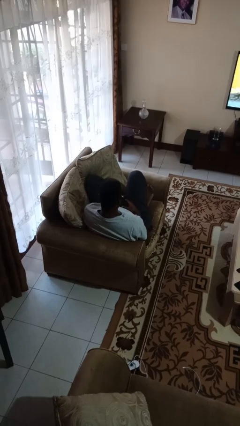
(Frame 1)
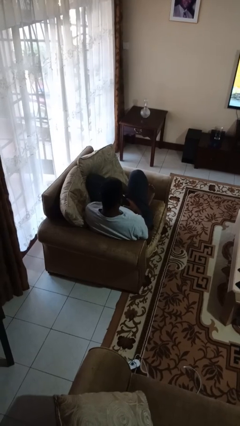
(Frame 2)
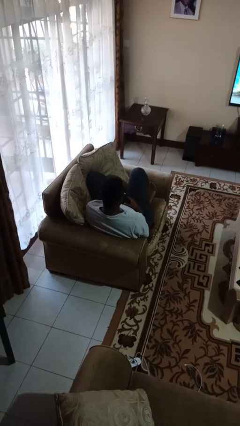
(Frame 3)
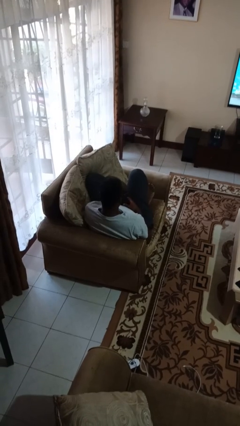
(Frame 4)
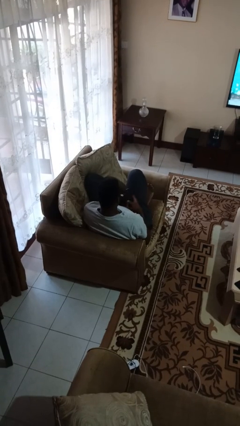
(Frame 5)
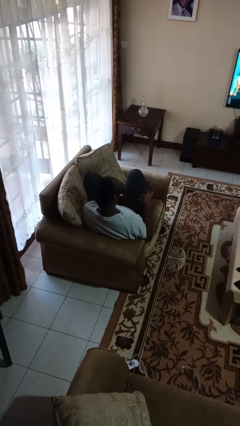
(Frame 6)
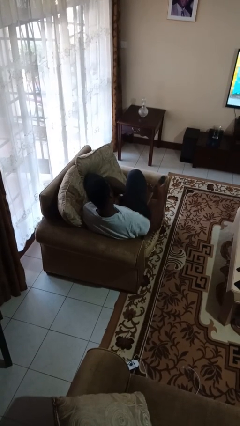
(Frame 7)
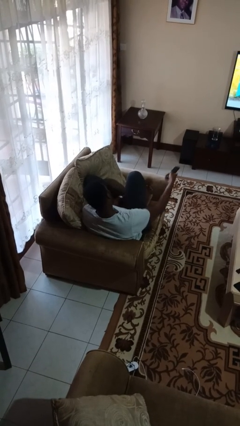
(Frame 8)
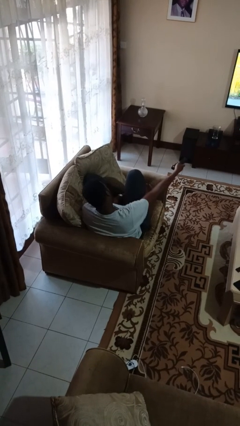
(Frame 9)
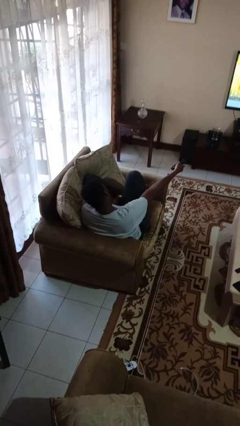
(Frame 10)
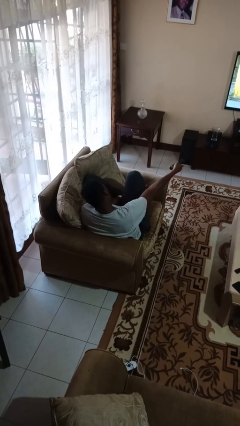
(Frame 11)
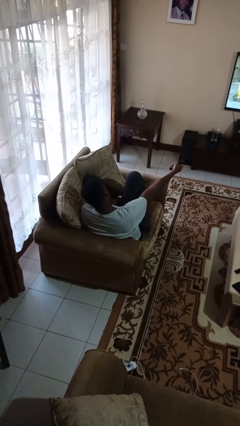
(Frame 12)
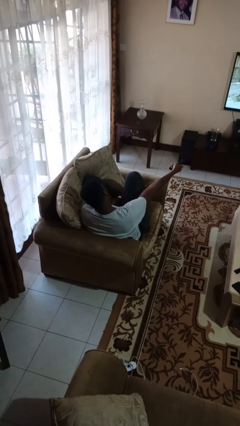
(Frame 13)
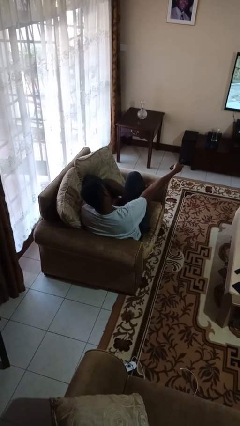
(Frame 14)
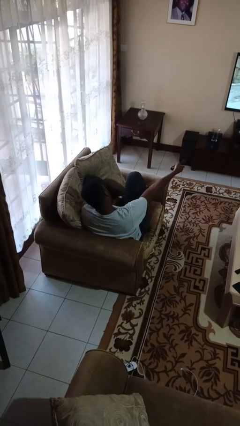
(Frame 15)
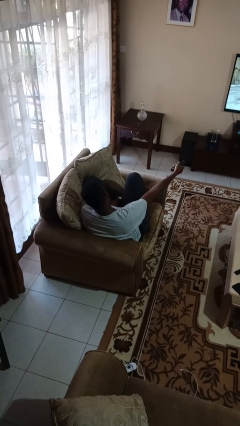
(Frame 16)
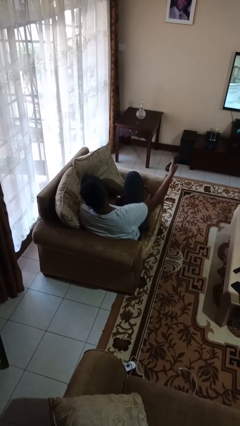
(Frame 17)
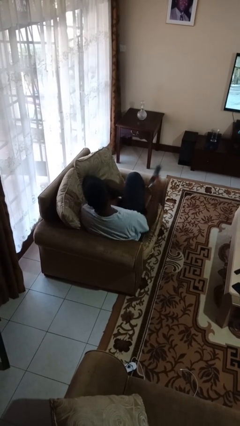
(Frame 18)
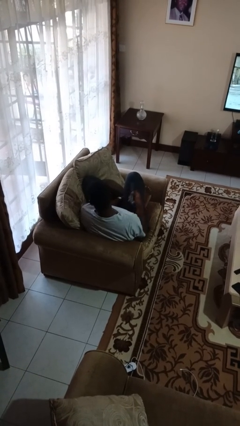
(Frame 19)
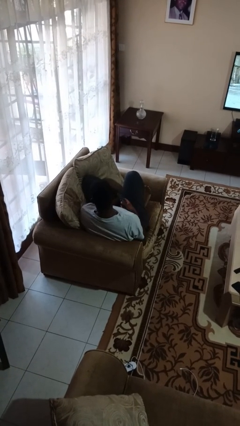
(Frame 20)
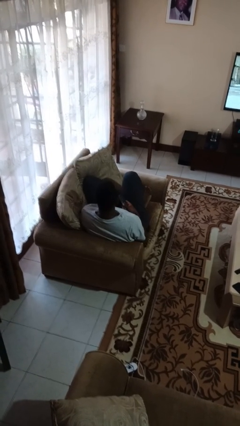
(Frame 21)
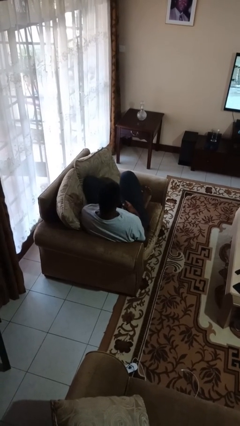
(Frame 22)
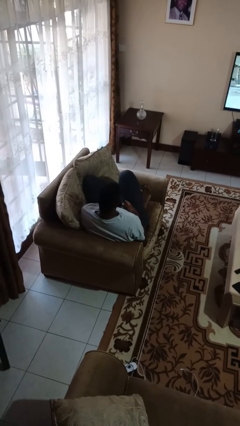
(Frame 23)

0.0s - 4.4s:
person uses television remote

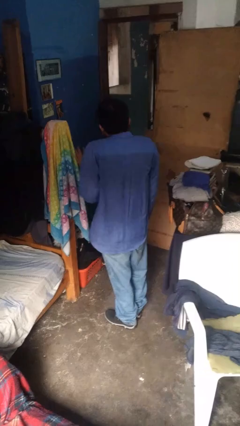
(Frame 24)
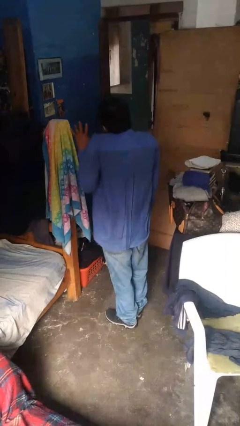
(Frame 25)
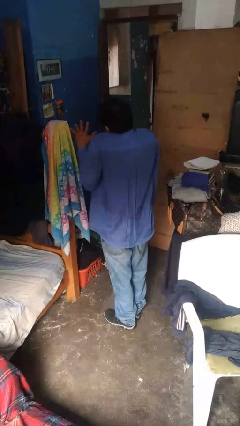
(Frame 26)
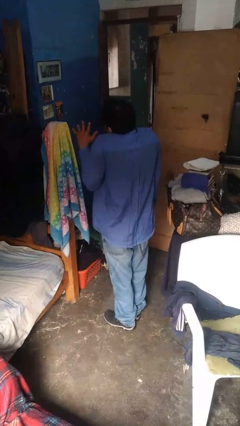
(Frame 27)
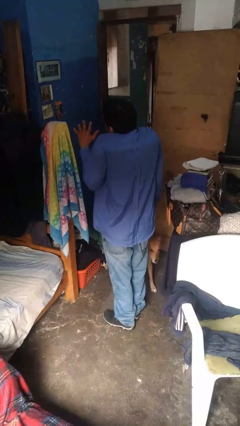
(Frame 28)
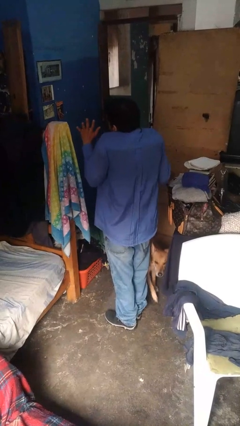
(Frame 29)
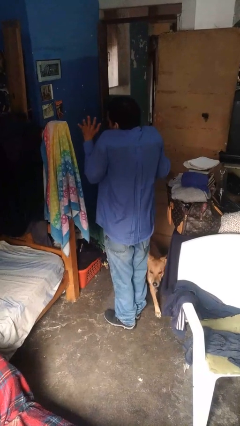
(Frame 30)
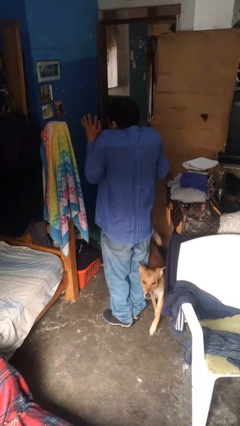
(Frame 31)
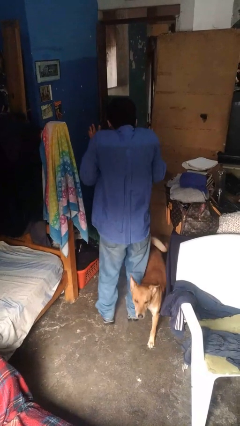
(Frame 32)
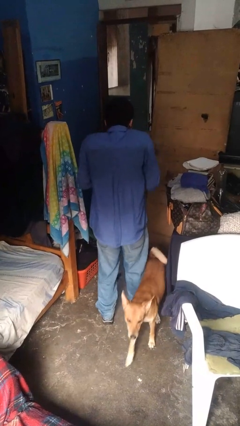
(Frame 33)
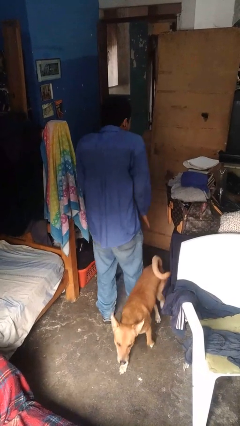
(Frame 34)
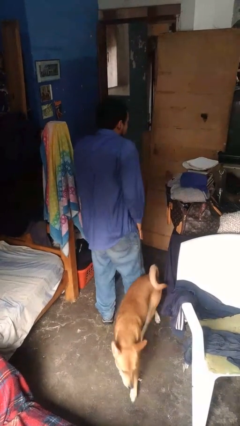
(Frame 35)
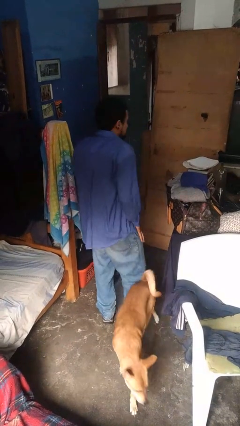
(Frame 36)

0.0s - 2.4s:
person shrugs

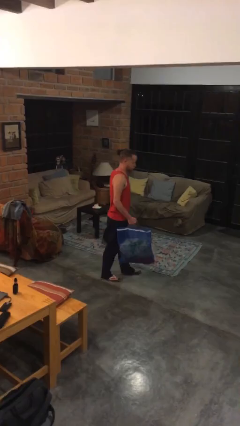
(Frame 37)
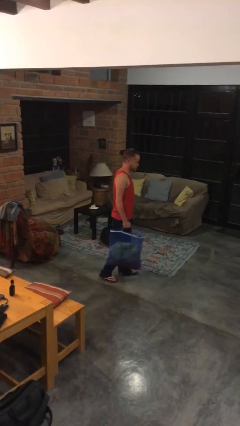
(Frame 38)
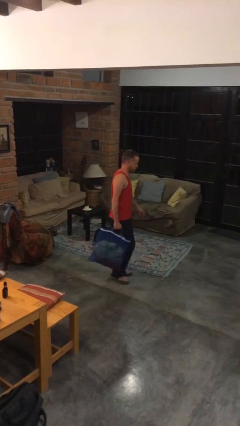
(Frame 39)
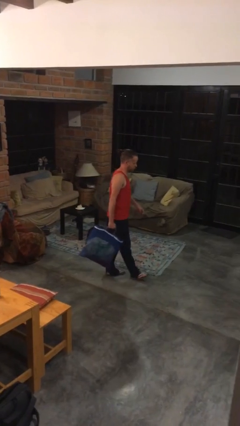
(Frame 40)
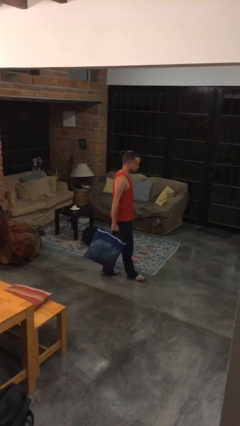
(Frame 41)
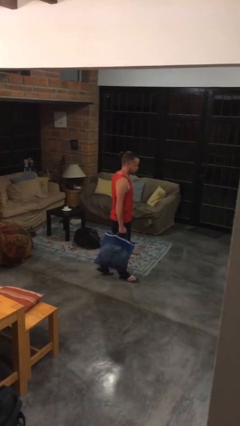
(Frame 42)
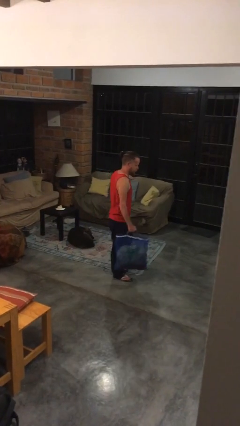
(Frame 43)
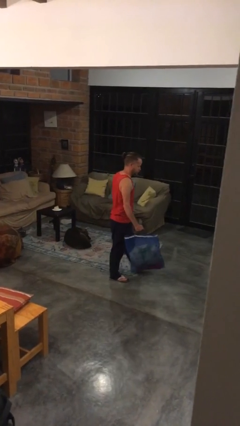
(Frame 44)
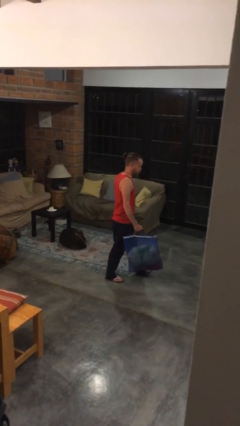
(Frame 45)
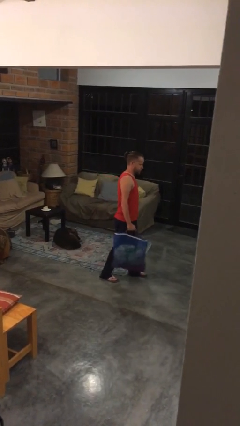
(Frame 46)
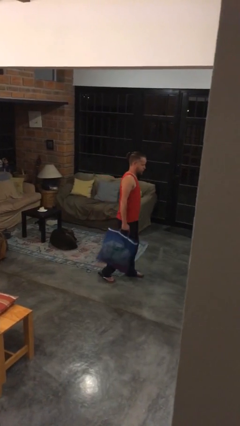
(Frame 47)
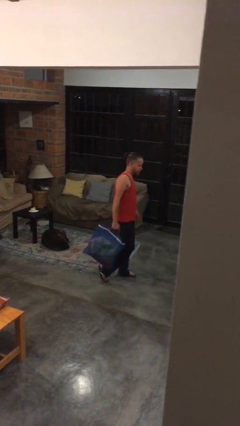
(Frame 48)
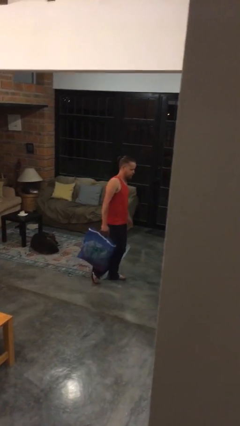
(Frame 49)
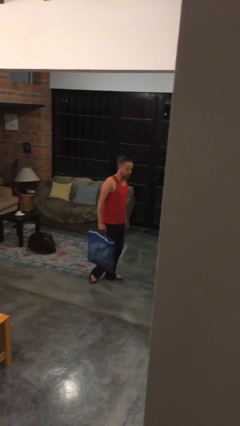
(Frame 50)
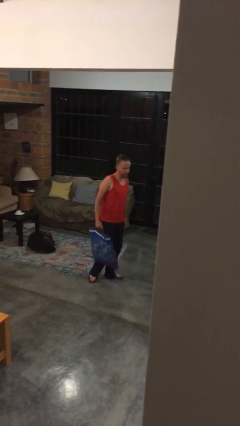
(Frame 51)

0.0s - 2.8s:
person carries groceries

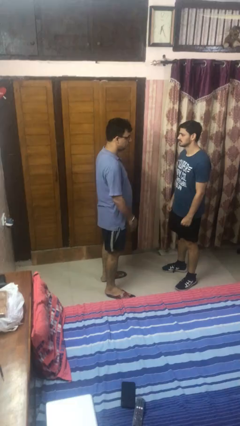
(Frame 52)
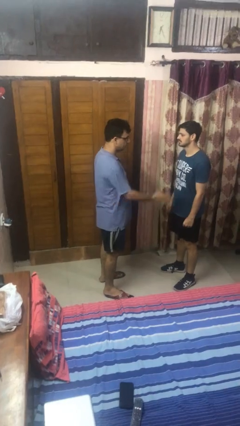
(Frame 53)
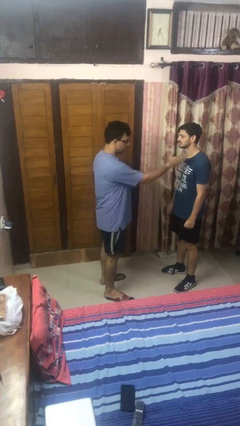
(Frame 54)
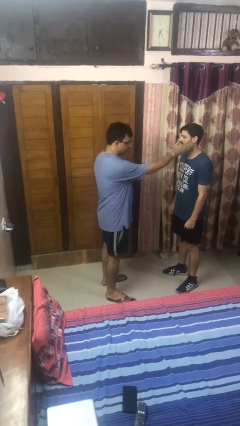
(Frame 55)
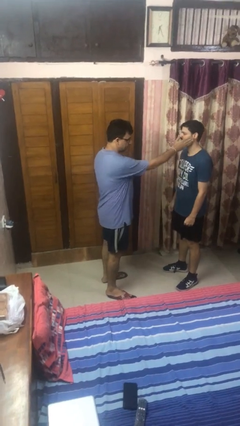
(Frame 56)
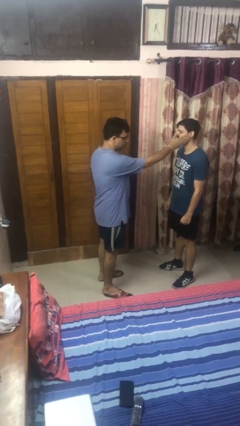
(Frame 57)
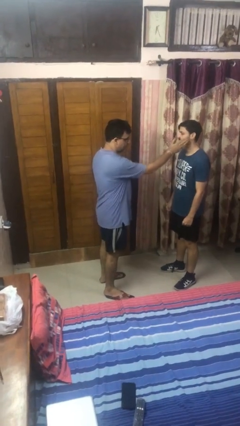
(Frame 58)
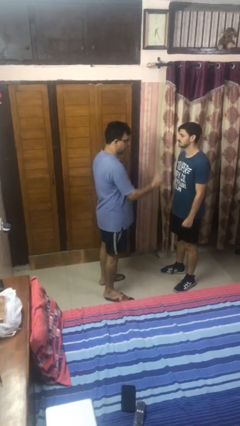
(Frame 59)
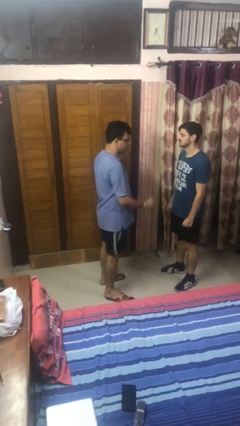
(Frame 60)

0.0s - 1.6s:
person touches face of person

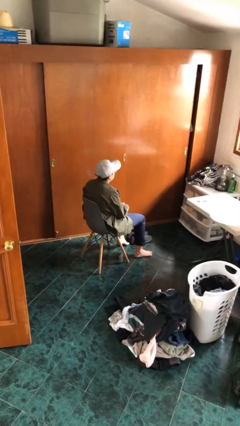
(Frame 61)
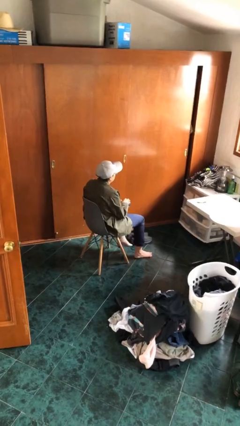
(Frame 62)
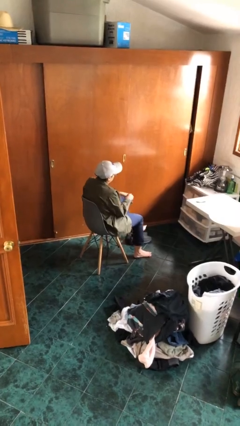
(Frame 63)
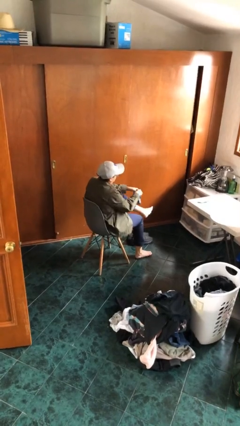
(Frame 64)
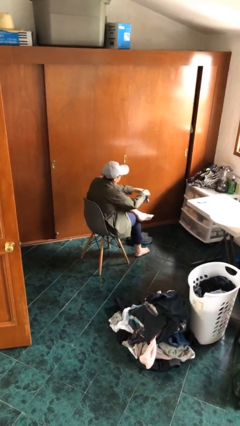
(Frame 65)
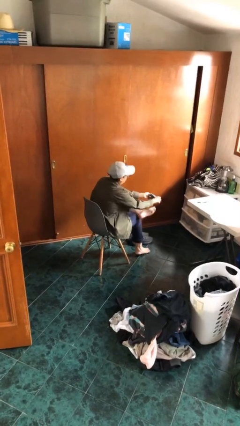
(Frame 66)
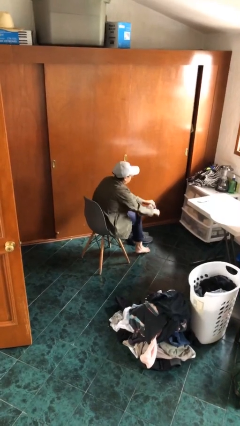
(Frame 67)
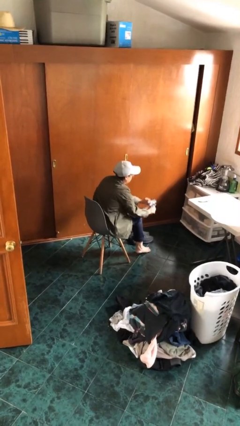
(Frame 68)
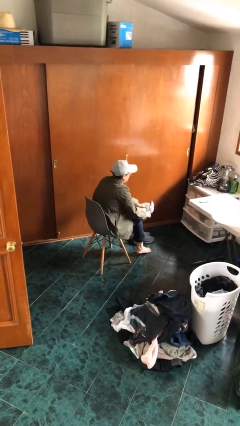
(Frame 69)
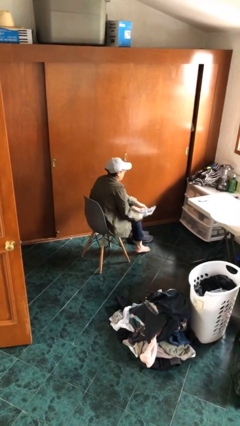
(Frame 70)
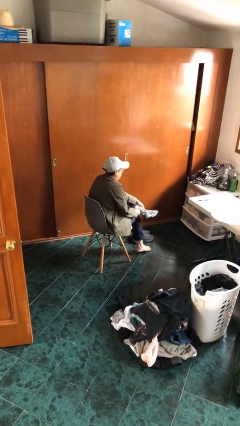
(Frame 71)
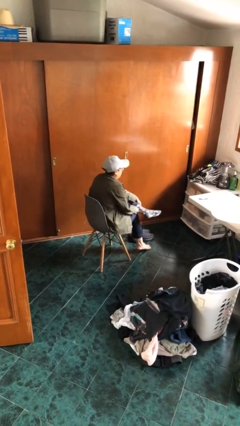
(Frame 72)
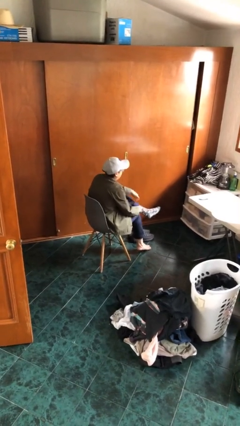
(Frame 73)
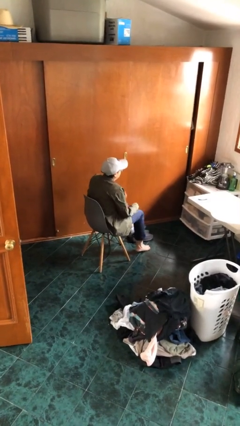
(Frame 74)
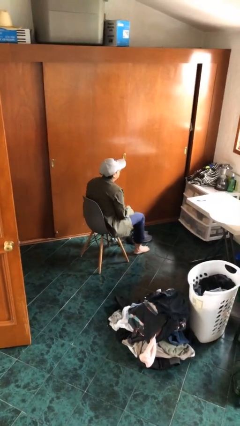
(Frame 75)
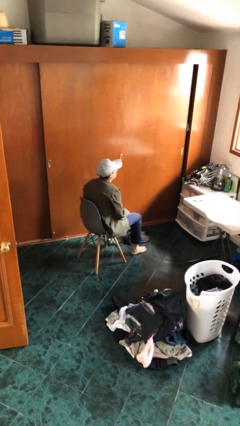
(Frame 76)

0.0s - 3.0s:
person puts on socks

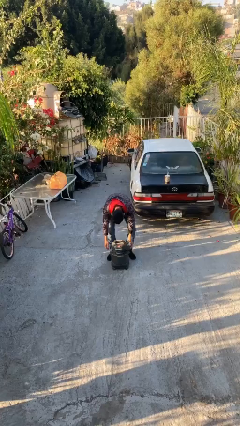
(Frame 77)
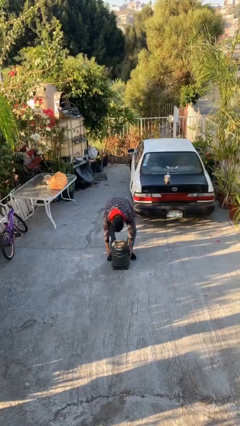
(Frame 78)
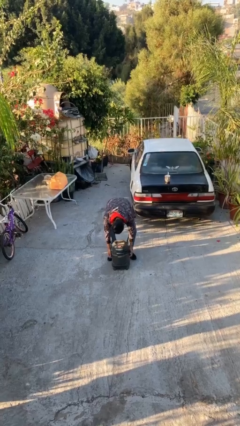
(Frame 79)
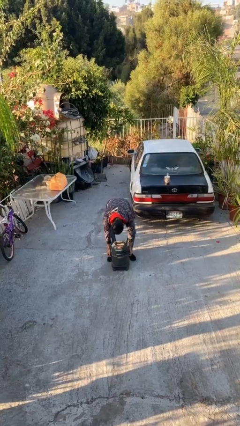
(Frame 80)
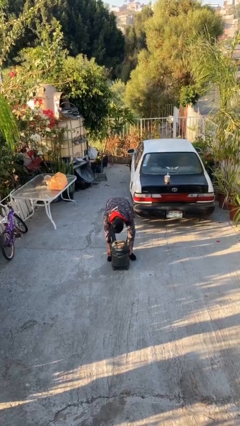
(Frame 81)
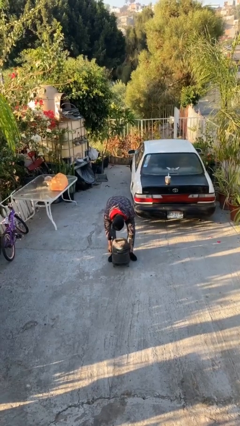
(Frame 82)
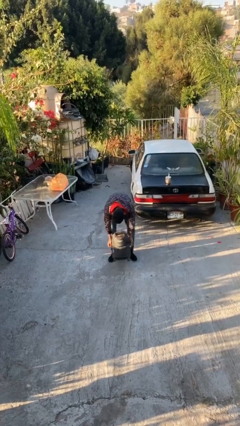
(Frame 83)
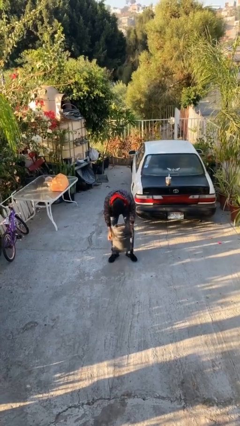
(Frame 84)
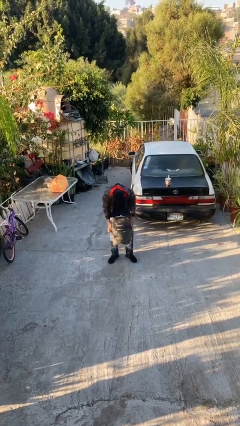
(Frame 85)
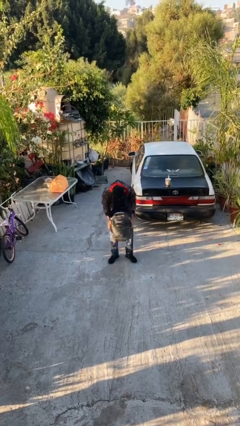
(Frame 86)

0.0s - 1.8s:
person picks up object from floor

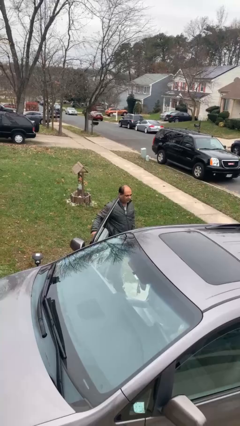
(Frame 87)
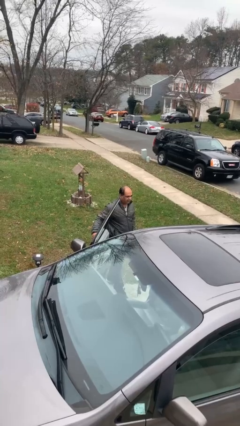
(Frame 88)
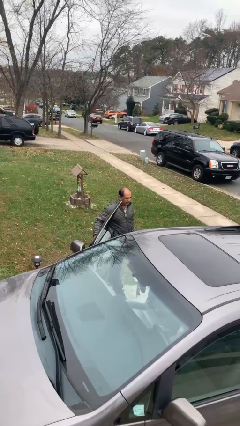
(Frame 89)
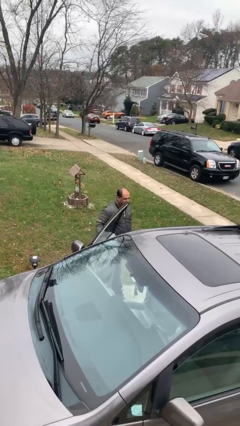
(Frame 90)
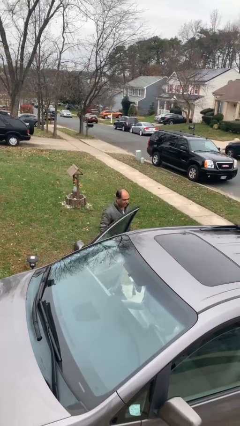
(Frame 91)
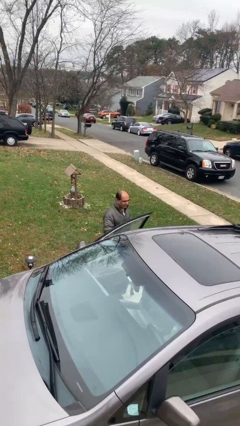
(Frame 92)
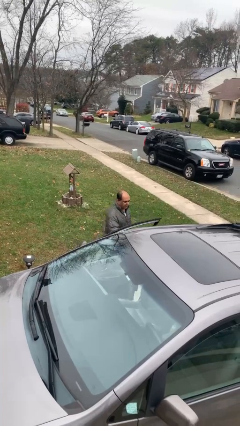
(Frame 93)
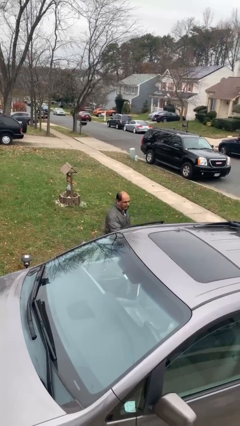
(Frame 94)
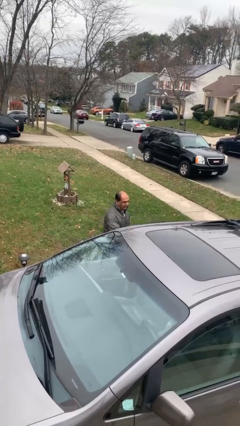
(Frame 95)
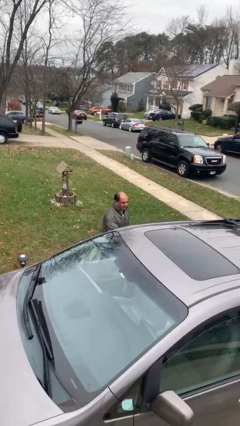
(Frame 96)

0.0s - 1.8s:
person closes car door
